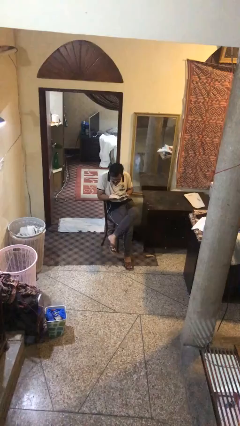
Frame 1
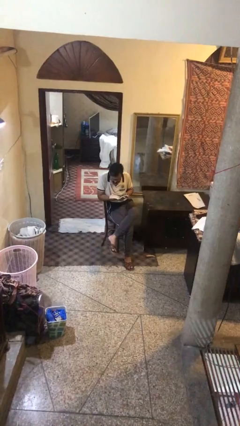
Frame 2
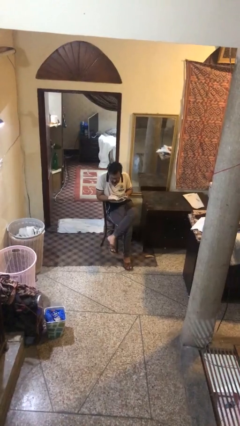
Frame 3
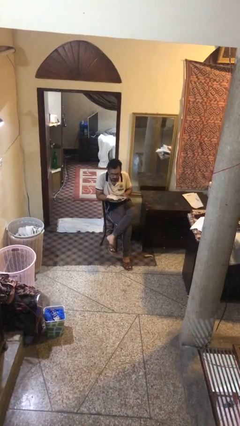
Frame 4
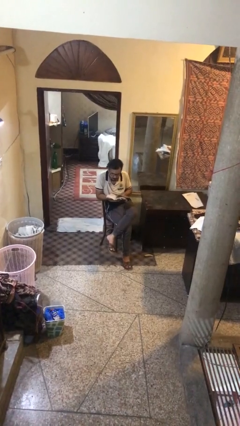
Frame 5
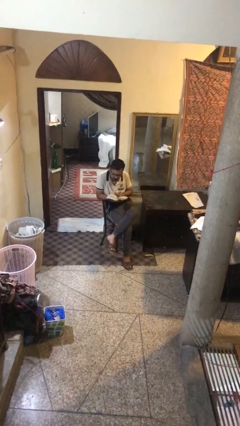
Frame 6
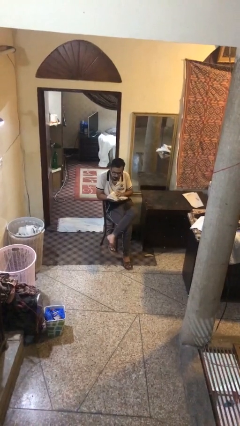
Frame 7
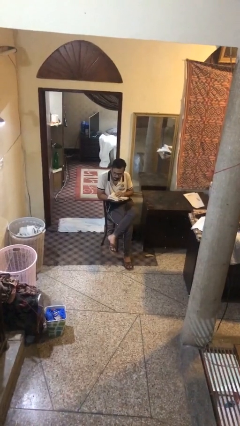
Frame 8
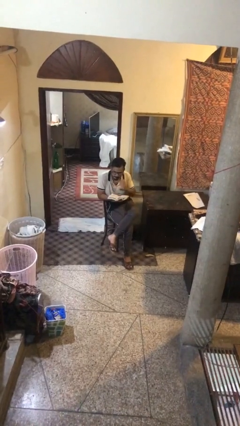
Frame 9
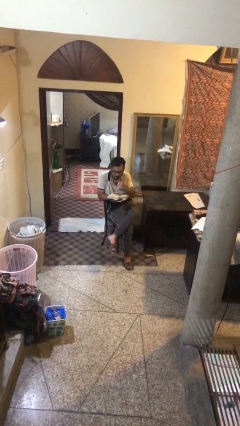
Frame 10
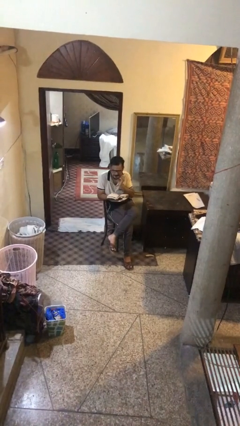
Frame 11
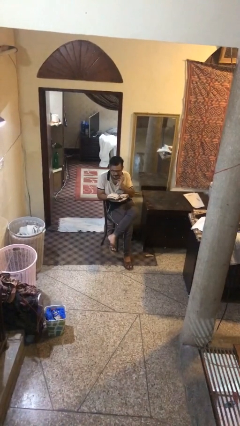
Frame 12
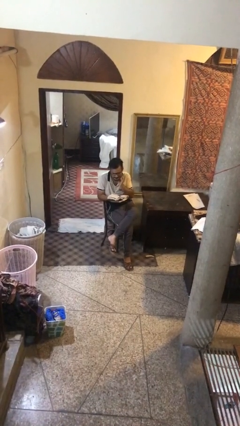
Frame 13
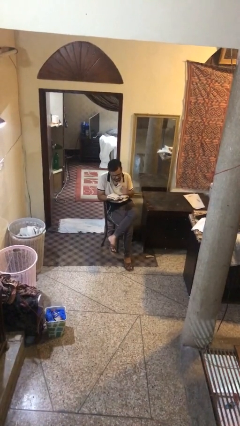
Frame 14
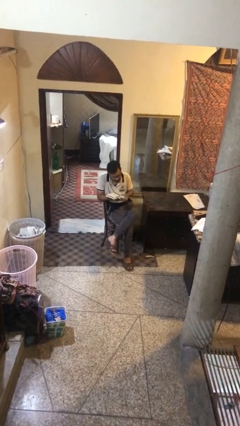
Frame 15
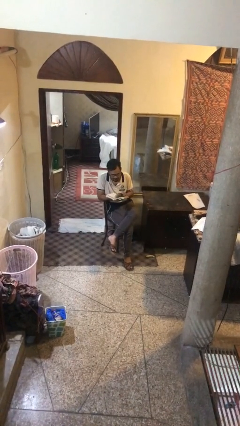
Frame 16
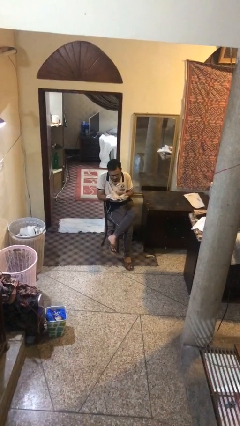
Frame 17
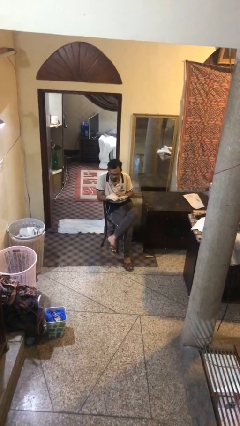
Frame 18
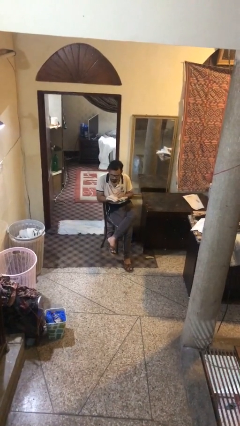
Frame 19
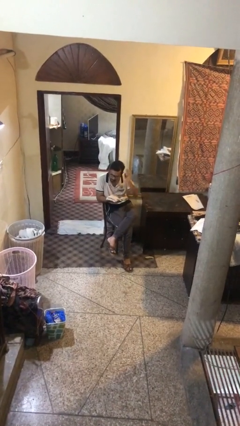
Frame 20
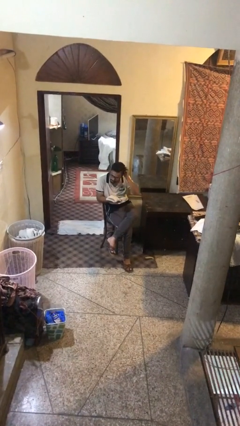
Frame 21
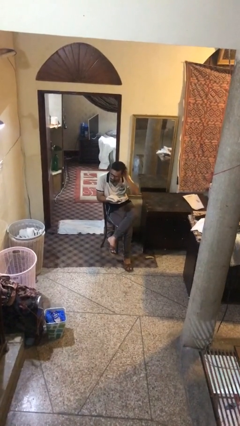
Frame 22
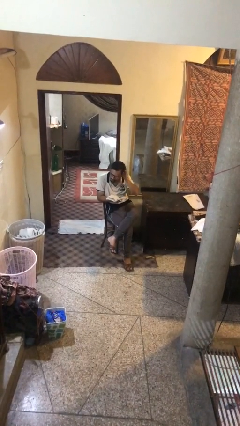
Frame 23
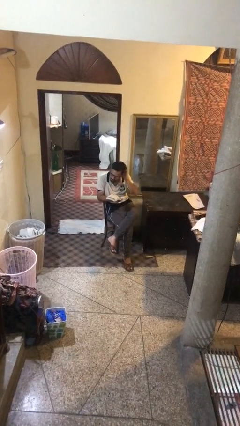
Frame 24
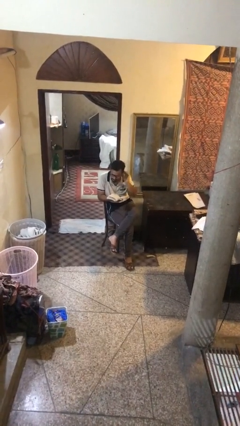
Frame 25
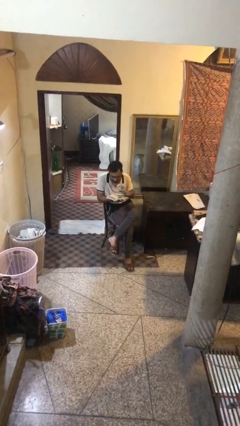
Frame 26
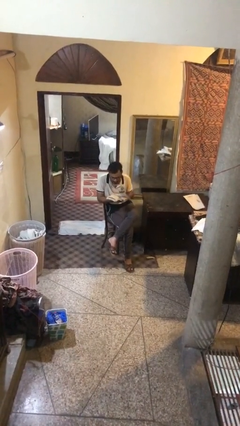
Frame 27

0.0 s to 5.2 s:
person reads document

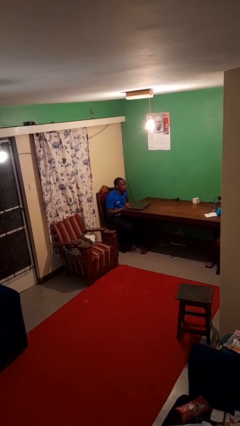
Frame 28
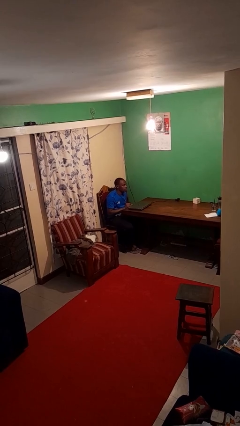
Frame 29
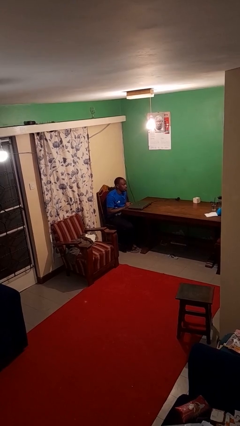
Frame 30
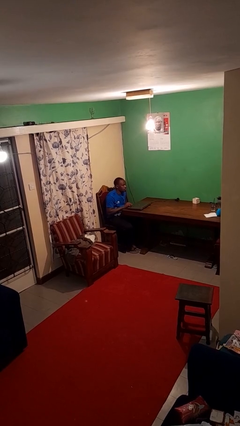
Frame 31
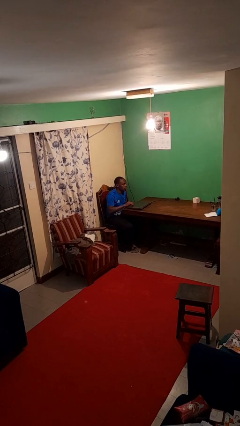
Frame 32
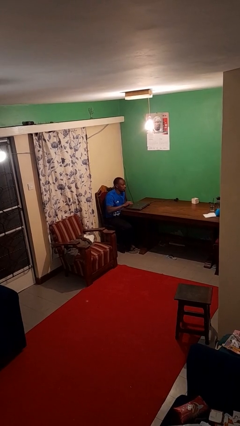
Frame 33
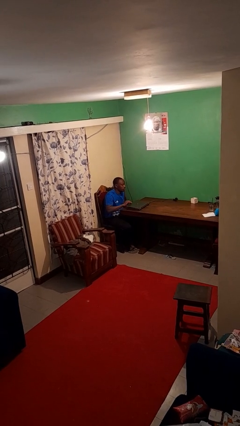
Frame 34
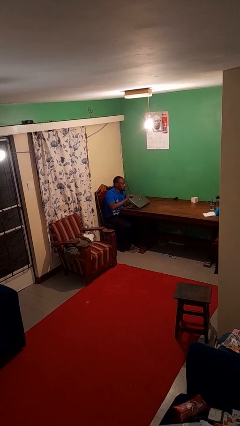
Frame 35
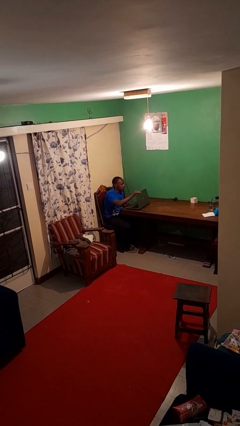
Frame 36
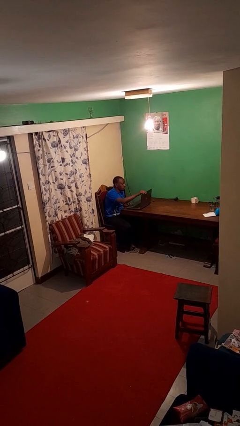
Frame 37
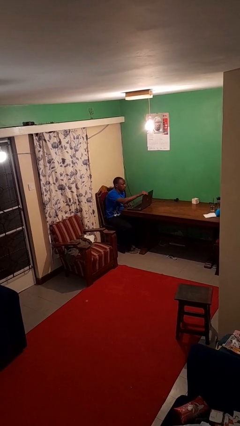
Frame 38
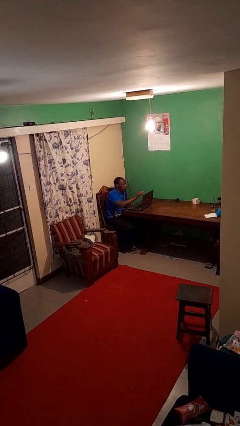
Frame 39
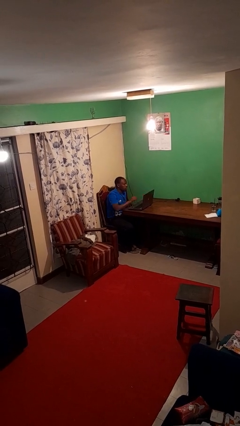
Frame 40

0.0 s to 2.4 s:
person opens laptop

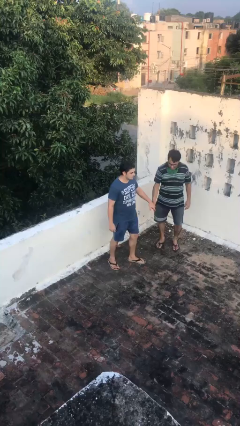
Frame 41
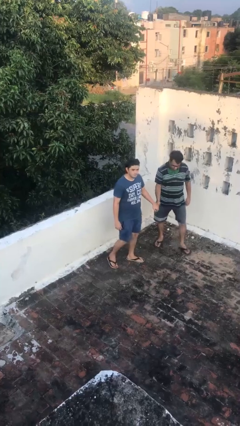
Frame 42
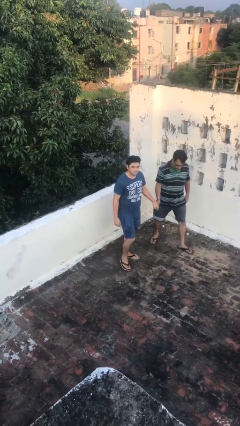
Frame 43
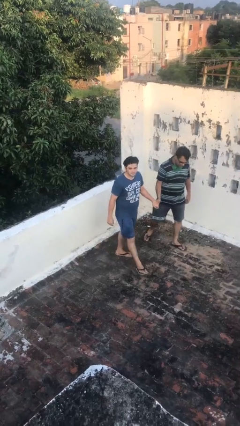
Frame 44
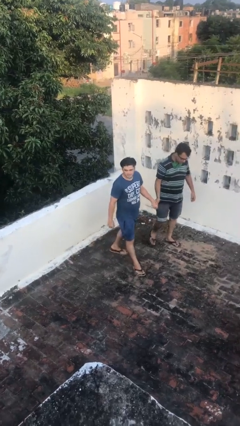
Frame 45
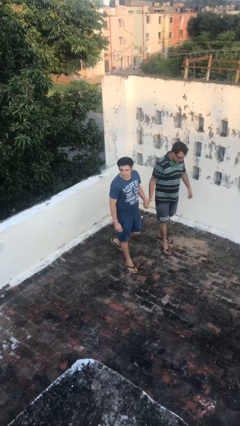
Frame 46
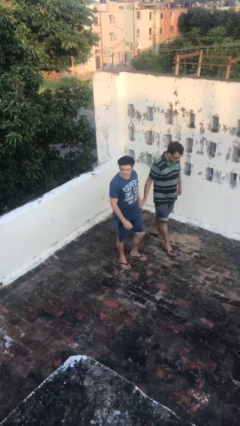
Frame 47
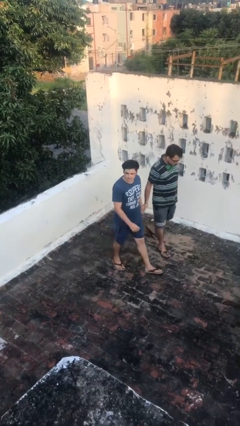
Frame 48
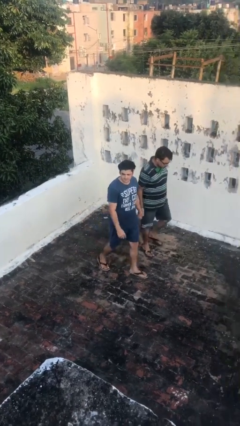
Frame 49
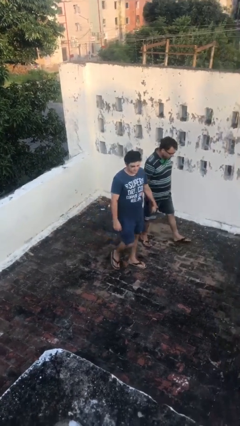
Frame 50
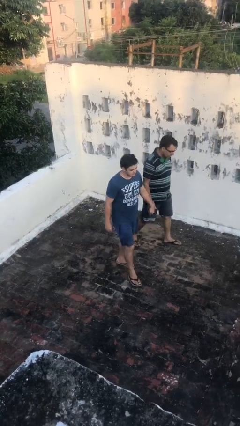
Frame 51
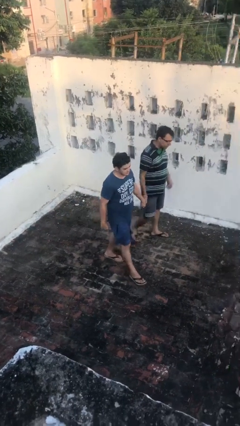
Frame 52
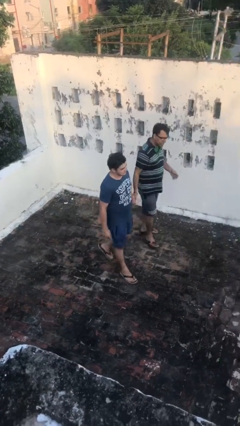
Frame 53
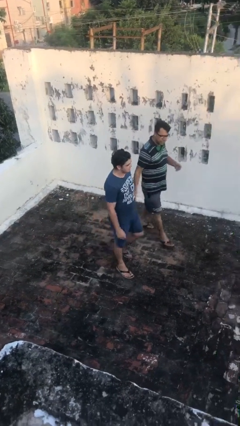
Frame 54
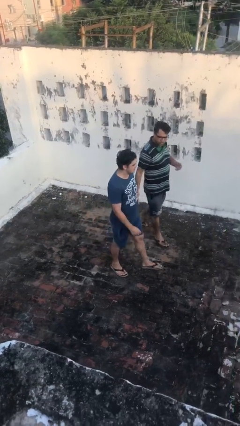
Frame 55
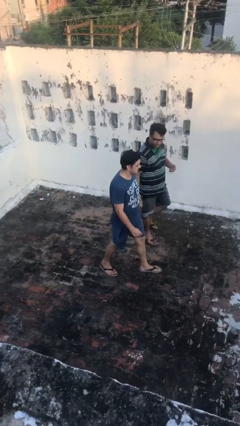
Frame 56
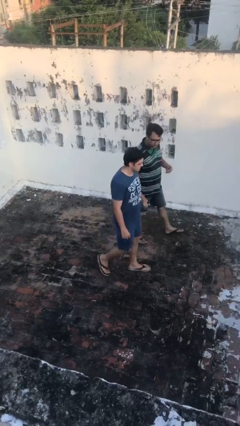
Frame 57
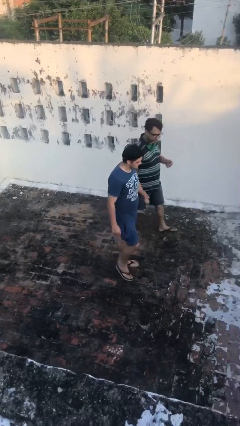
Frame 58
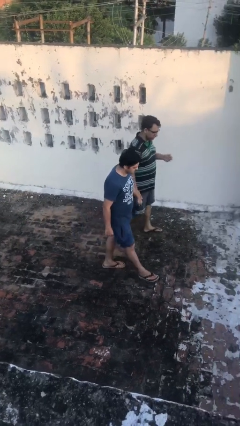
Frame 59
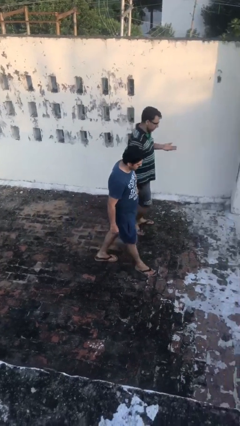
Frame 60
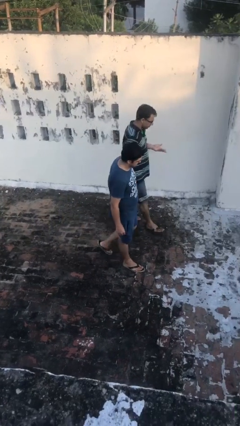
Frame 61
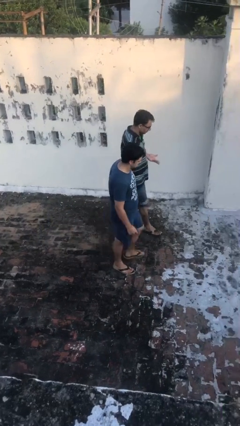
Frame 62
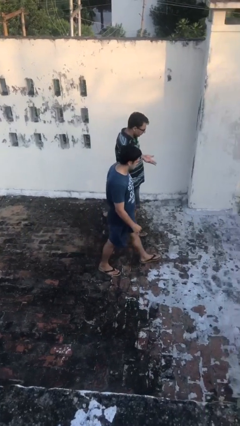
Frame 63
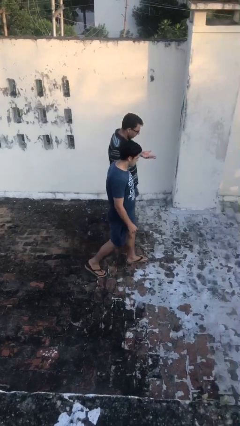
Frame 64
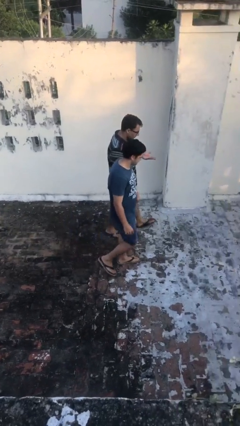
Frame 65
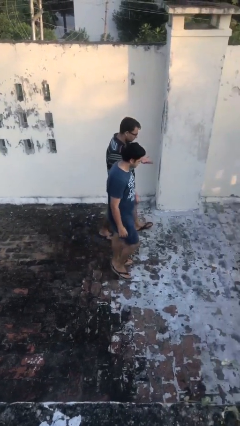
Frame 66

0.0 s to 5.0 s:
person holds hand

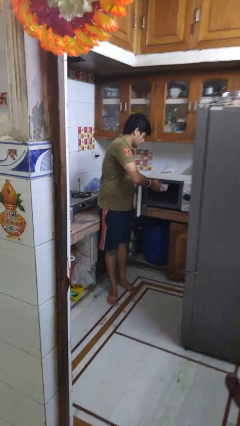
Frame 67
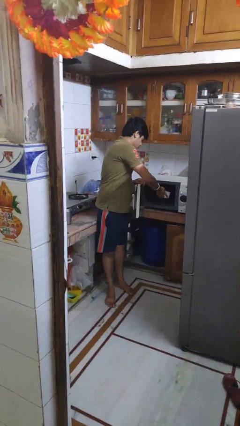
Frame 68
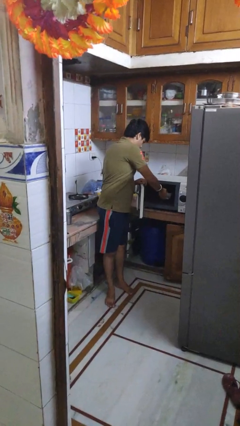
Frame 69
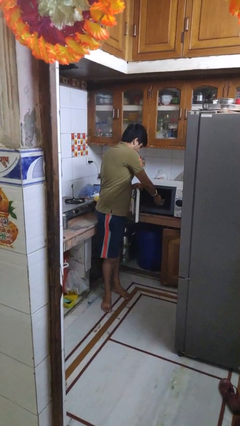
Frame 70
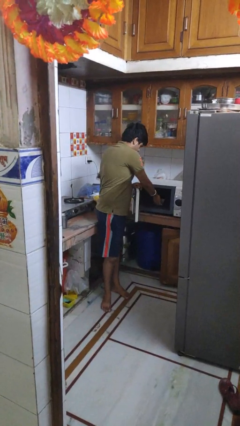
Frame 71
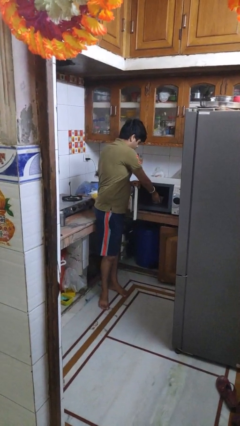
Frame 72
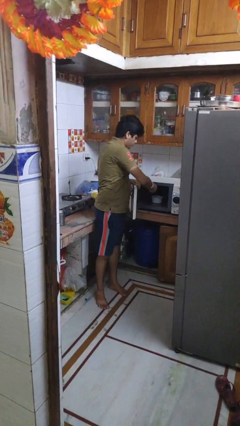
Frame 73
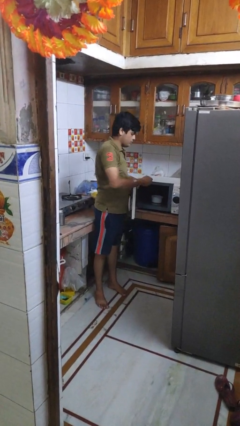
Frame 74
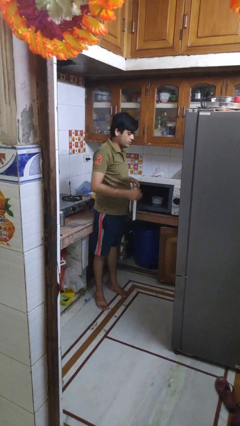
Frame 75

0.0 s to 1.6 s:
person puts object into microwave

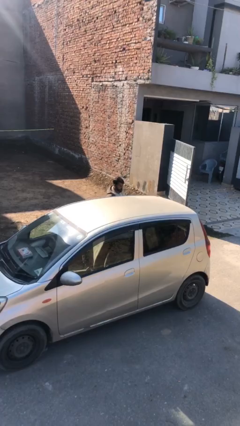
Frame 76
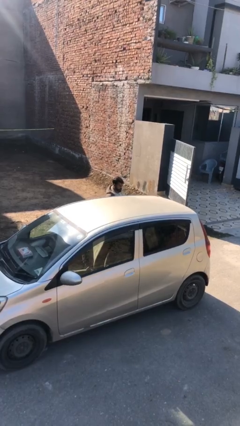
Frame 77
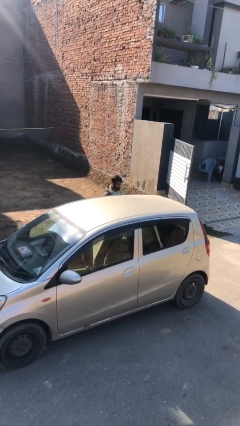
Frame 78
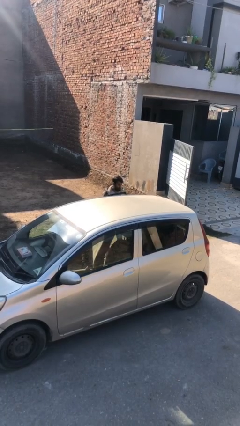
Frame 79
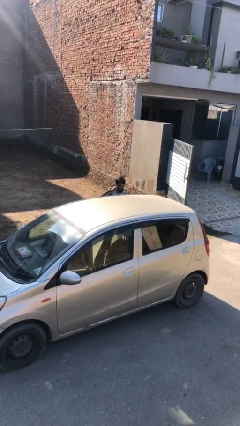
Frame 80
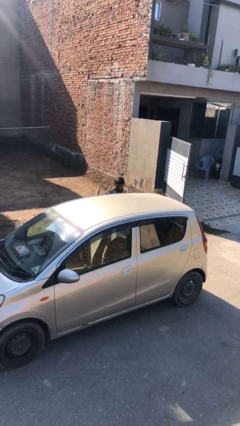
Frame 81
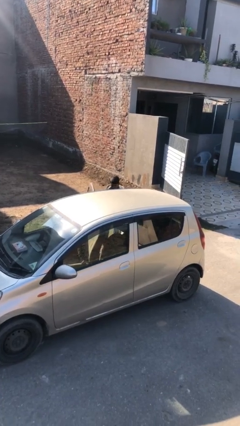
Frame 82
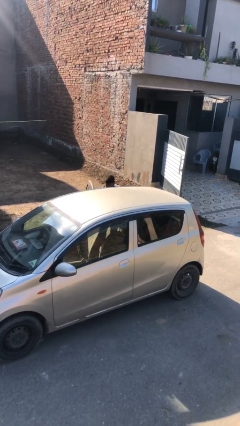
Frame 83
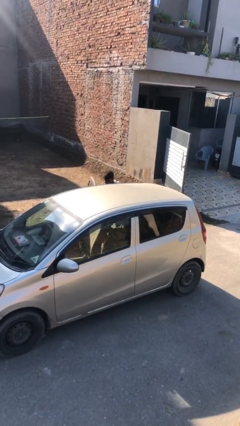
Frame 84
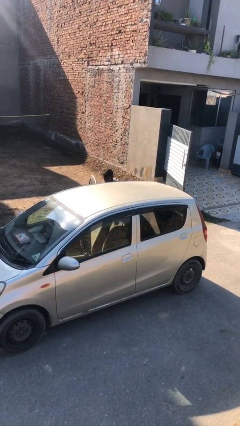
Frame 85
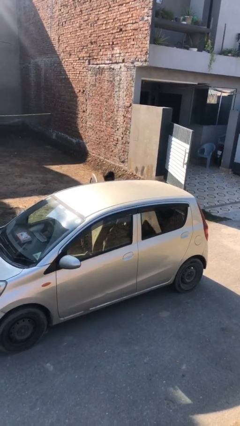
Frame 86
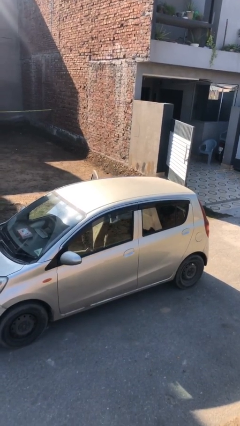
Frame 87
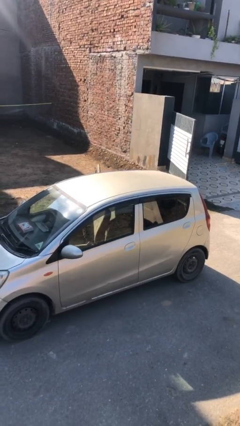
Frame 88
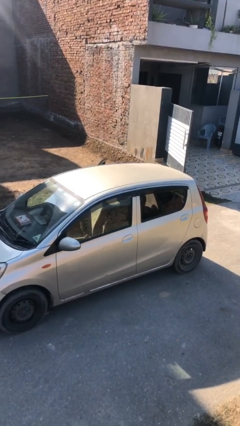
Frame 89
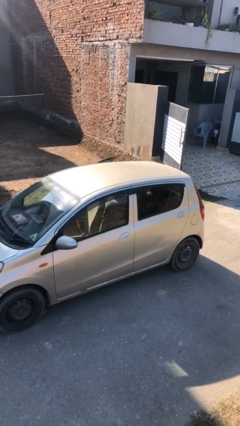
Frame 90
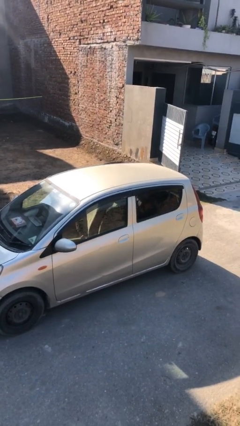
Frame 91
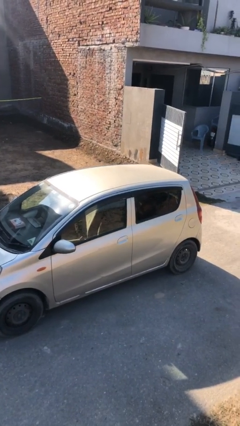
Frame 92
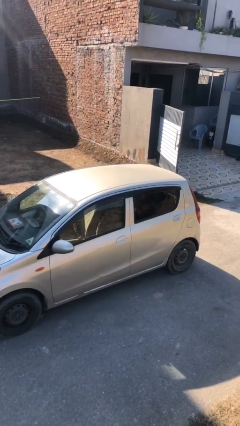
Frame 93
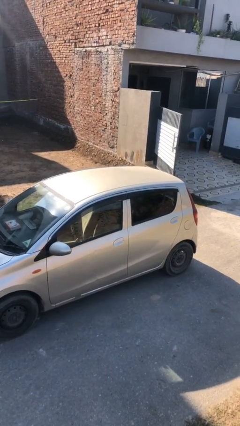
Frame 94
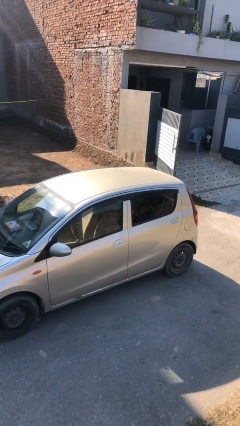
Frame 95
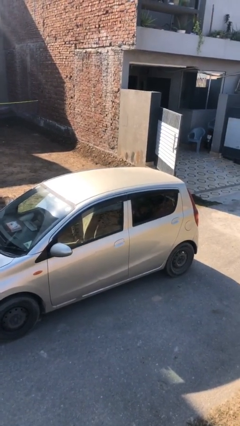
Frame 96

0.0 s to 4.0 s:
car picks up person
